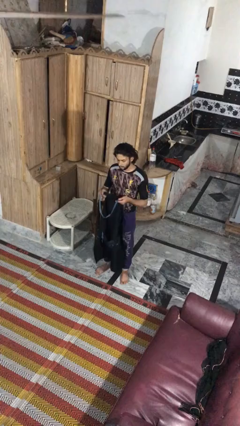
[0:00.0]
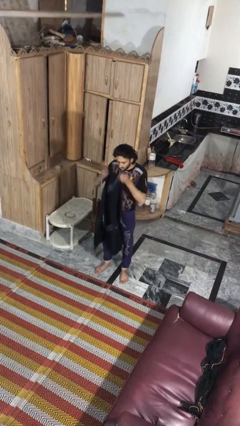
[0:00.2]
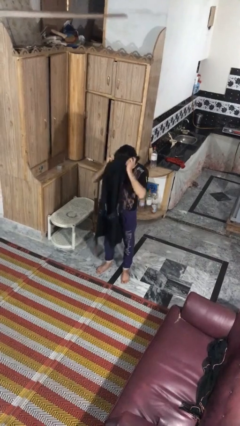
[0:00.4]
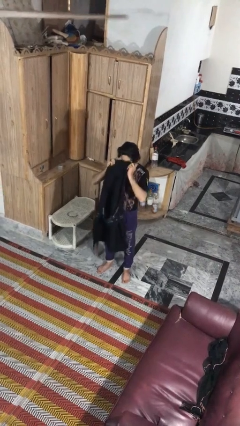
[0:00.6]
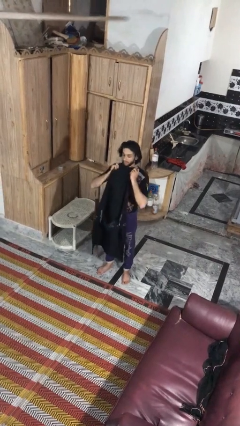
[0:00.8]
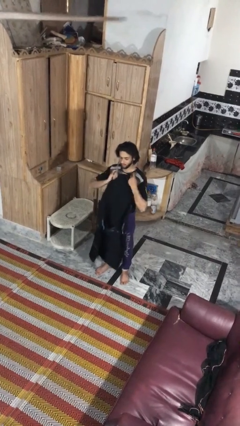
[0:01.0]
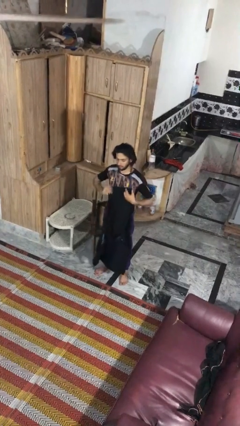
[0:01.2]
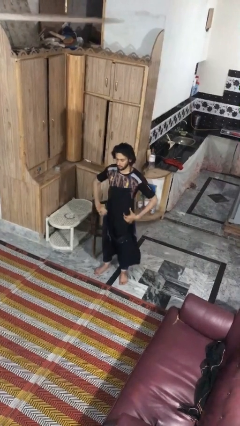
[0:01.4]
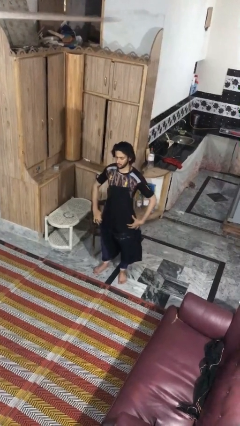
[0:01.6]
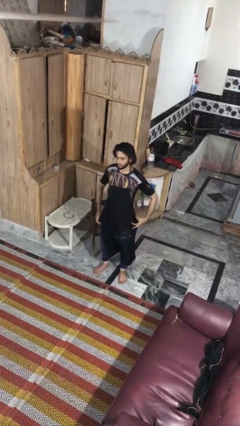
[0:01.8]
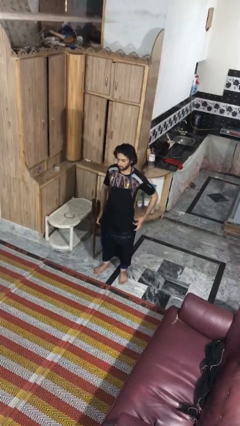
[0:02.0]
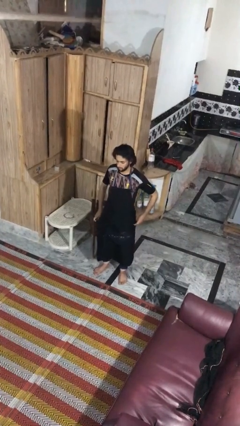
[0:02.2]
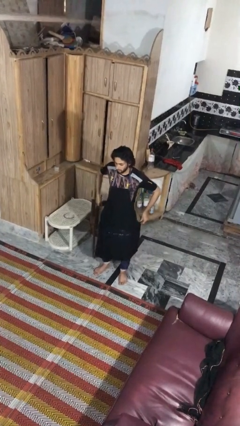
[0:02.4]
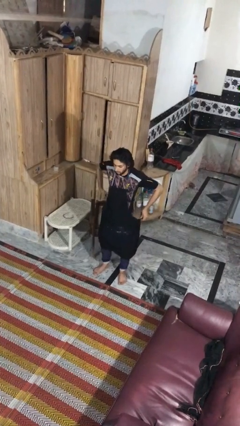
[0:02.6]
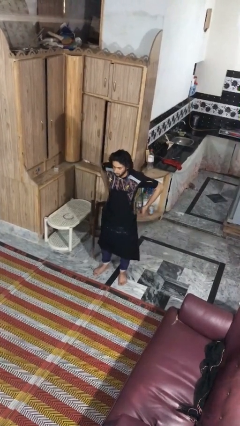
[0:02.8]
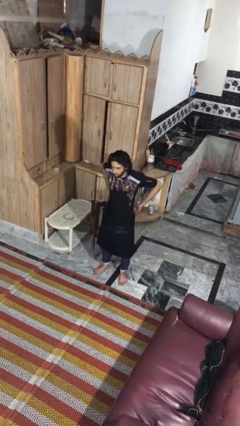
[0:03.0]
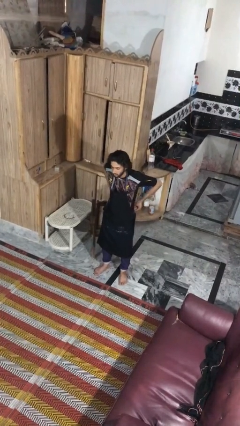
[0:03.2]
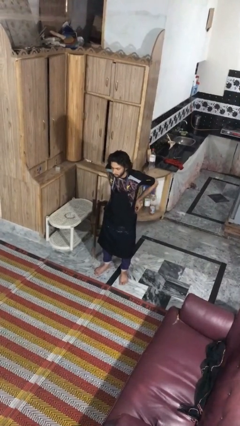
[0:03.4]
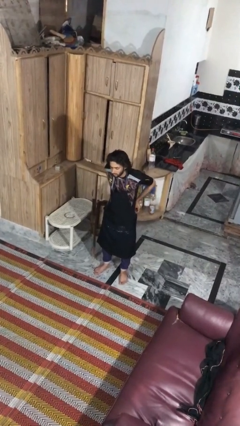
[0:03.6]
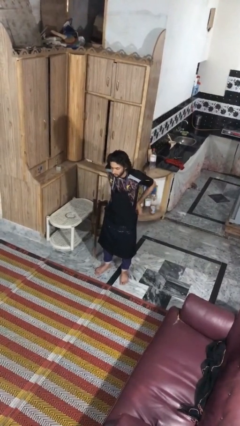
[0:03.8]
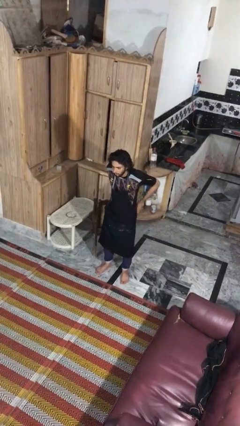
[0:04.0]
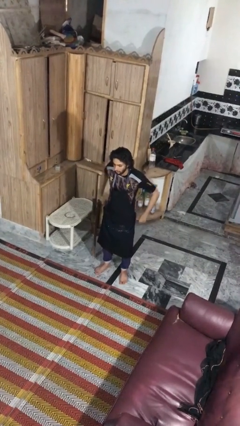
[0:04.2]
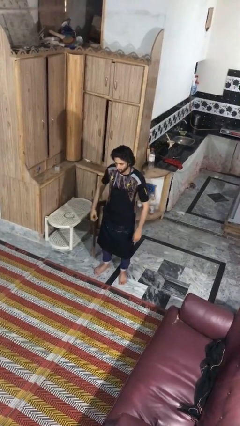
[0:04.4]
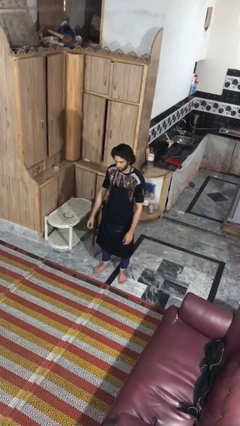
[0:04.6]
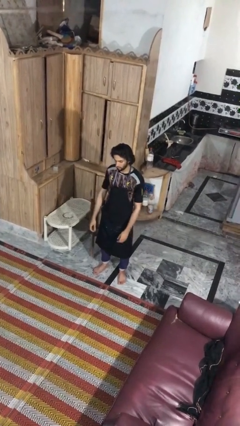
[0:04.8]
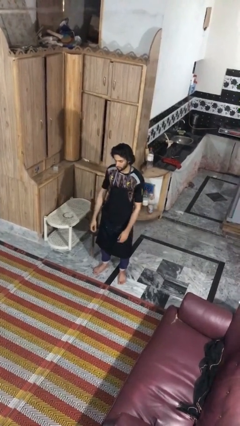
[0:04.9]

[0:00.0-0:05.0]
person puts on apron

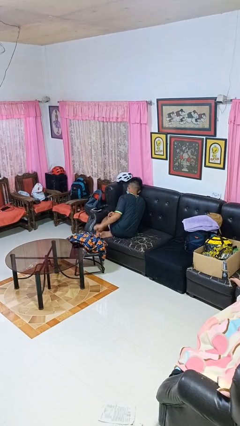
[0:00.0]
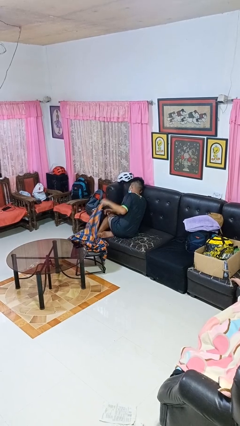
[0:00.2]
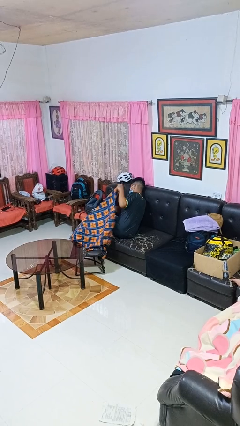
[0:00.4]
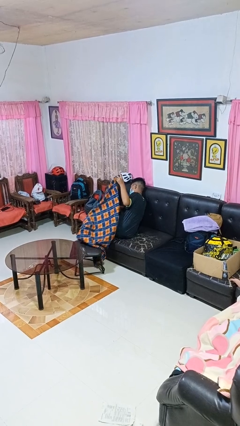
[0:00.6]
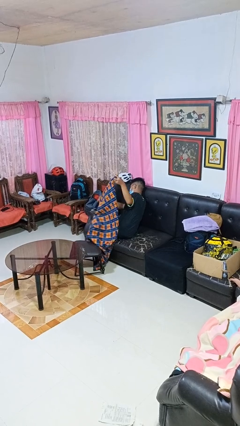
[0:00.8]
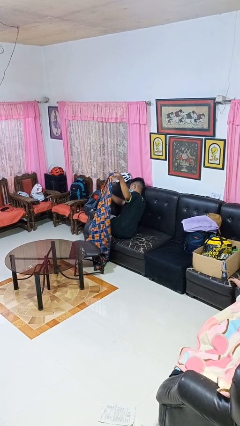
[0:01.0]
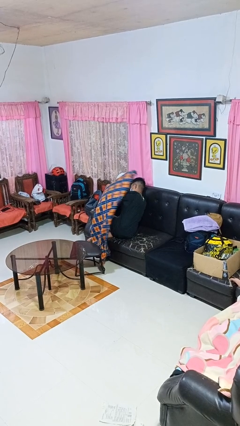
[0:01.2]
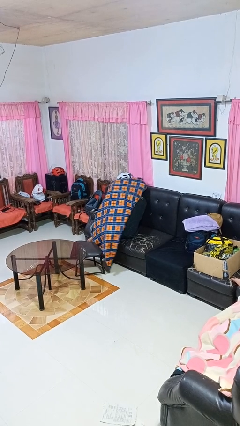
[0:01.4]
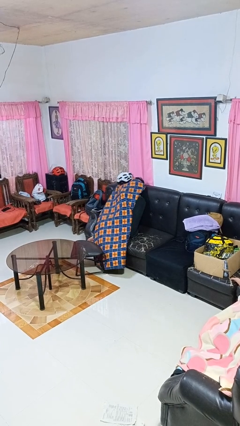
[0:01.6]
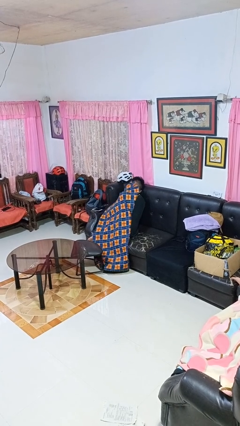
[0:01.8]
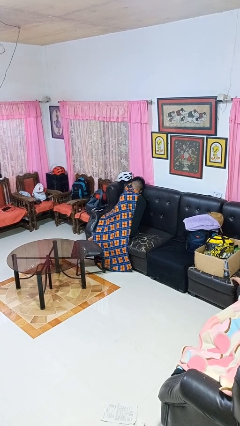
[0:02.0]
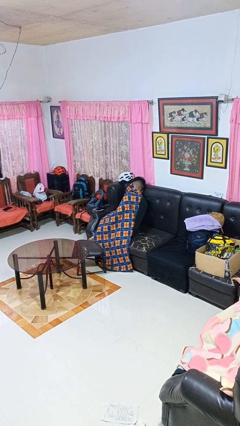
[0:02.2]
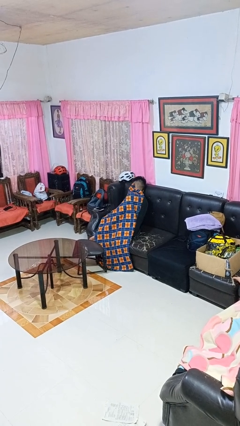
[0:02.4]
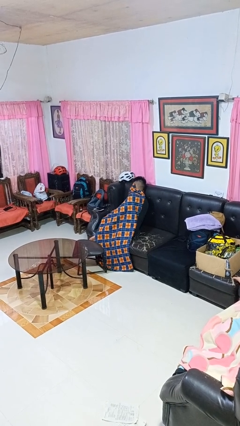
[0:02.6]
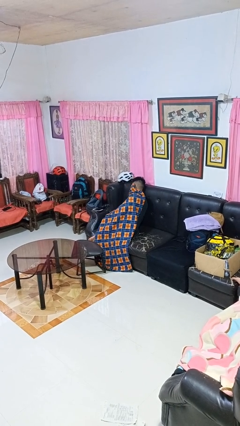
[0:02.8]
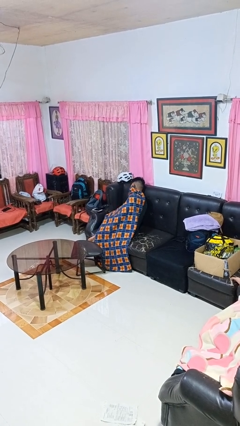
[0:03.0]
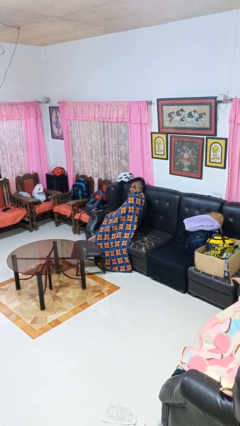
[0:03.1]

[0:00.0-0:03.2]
person covers with blanket

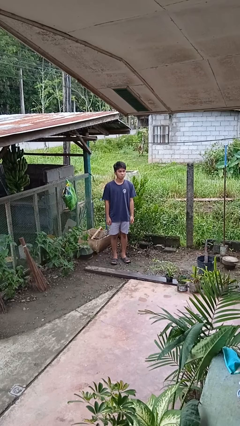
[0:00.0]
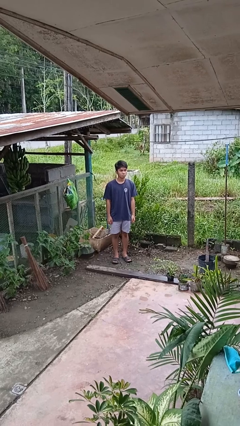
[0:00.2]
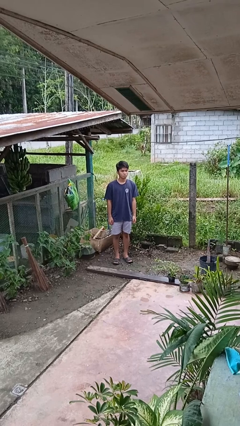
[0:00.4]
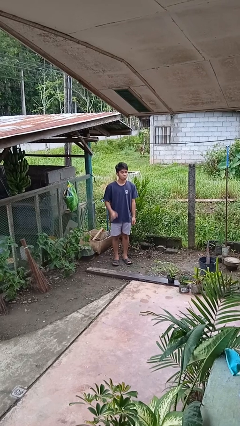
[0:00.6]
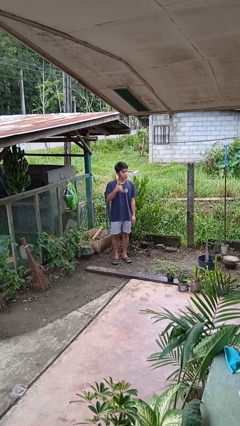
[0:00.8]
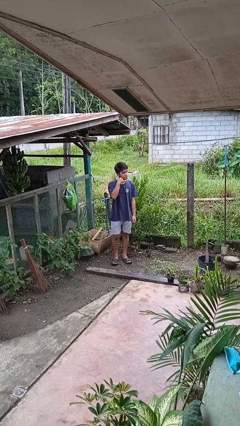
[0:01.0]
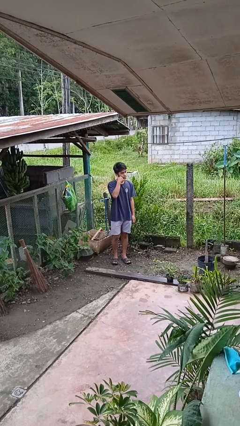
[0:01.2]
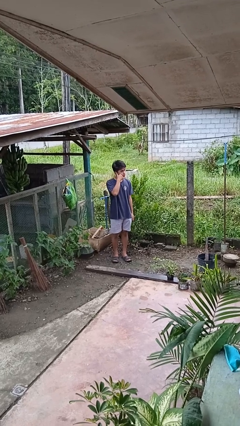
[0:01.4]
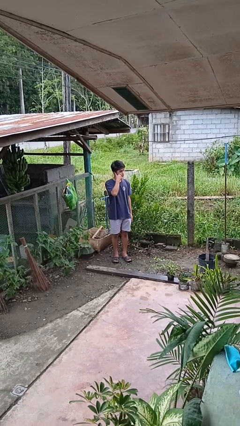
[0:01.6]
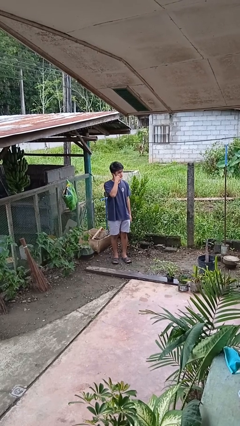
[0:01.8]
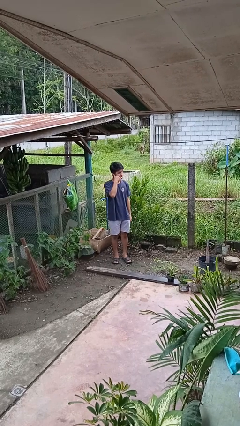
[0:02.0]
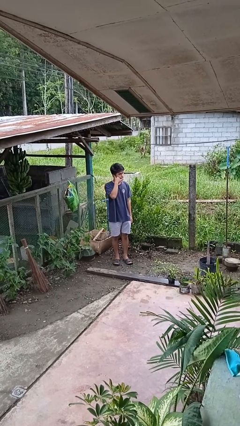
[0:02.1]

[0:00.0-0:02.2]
person gestures call me

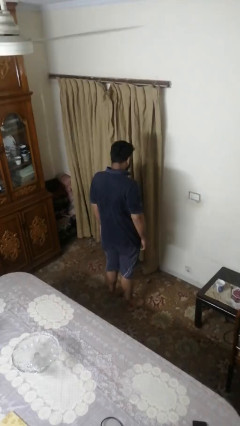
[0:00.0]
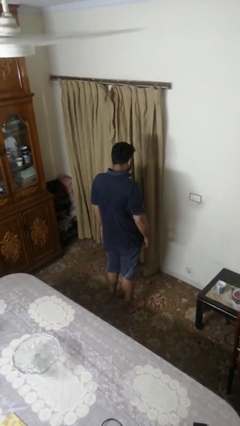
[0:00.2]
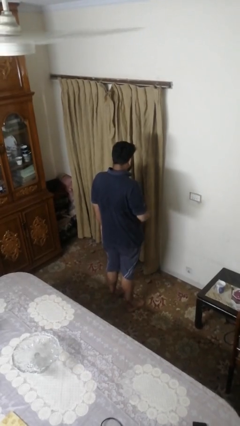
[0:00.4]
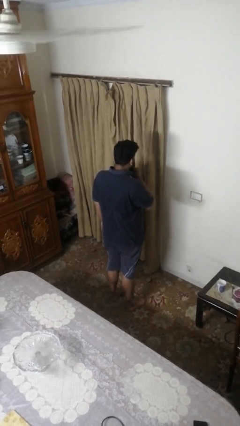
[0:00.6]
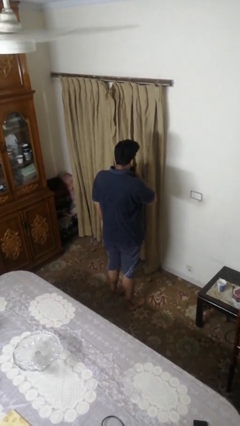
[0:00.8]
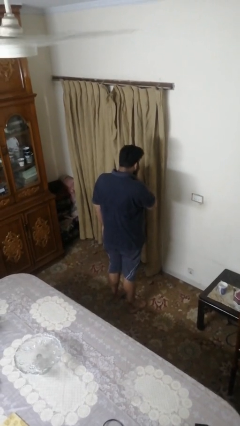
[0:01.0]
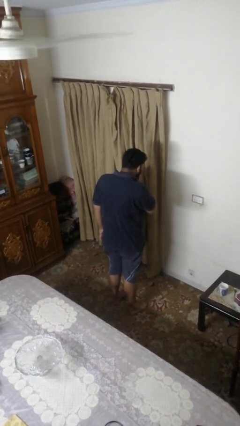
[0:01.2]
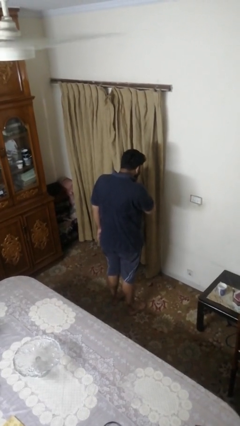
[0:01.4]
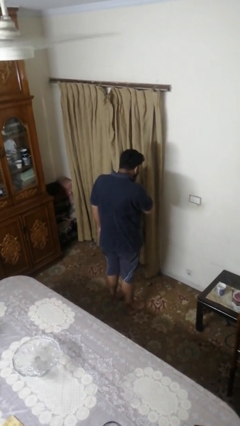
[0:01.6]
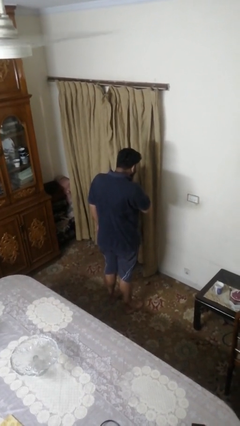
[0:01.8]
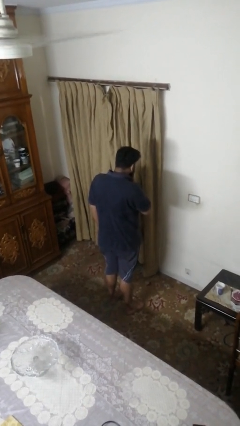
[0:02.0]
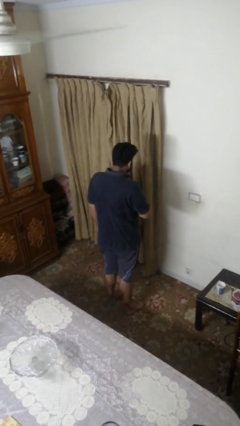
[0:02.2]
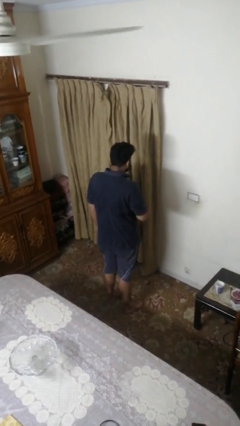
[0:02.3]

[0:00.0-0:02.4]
person strokes chin

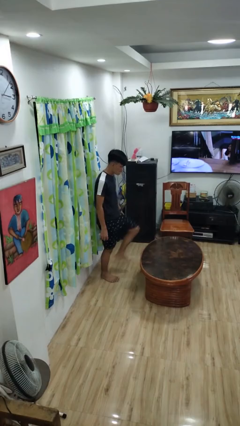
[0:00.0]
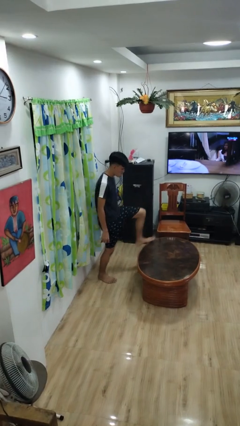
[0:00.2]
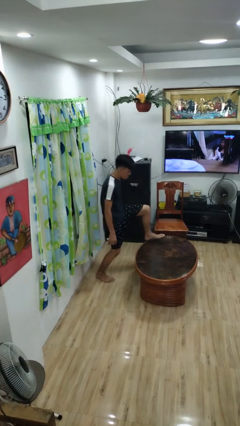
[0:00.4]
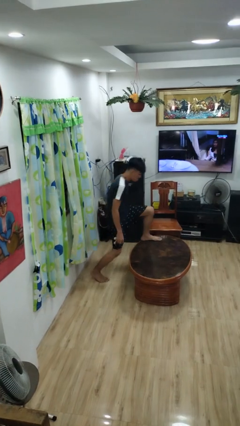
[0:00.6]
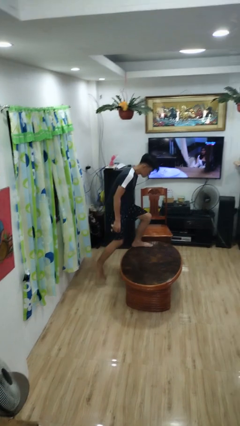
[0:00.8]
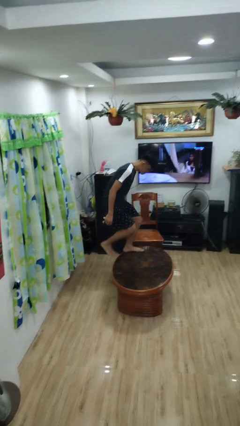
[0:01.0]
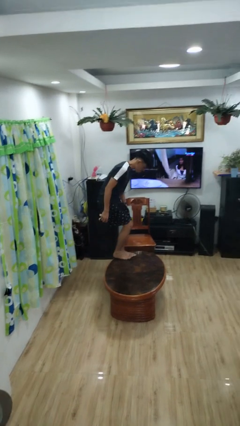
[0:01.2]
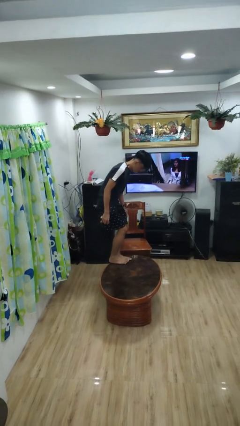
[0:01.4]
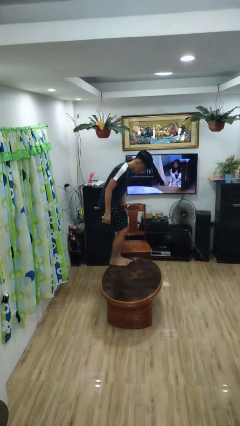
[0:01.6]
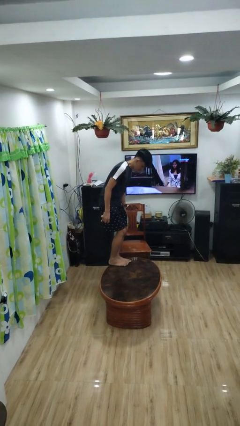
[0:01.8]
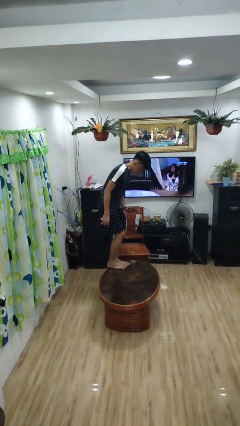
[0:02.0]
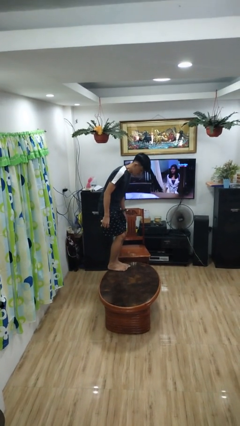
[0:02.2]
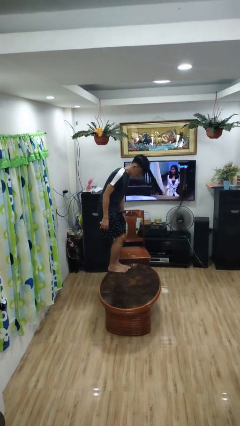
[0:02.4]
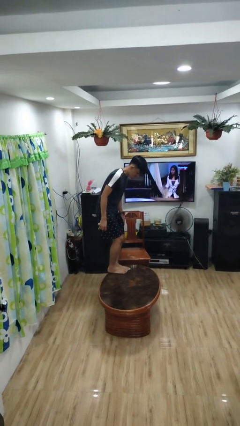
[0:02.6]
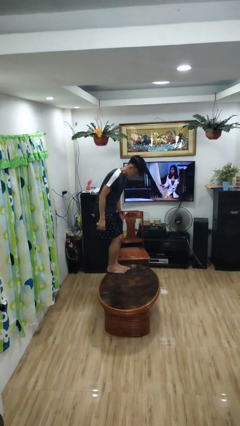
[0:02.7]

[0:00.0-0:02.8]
person climbs on table

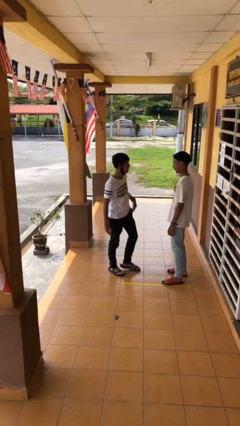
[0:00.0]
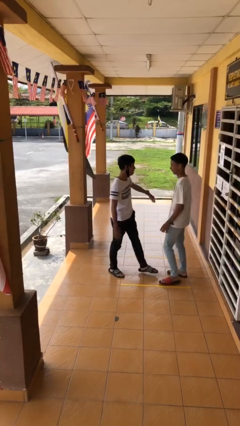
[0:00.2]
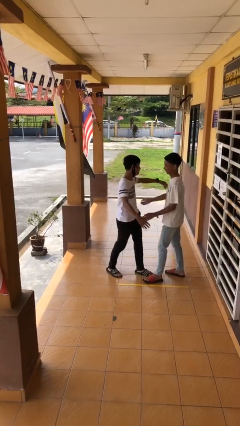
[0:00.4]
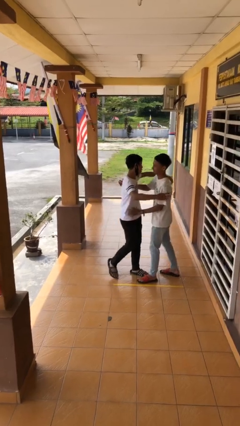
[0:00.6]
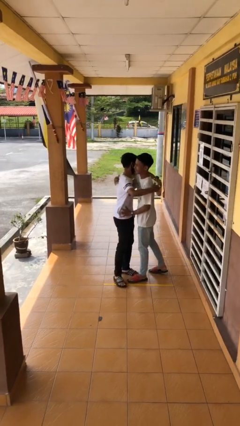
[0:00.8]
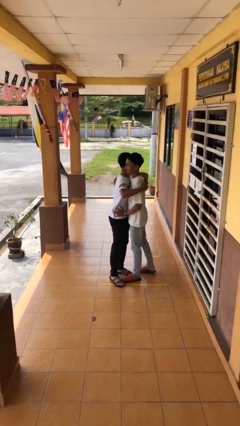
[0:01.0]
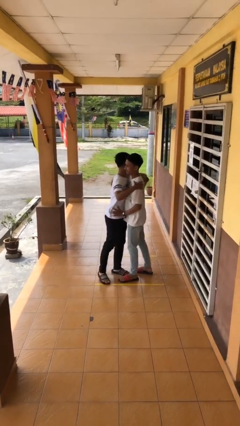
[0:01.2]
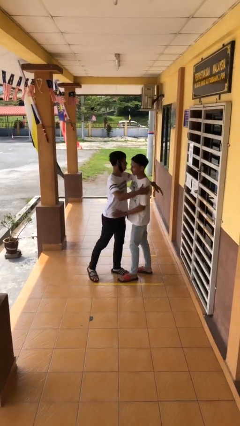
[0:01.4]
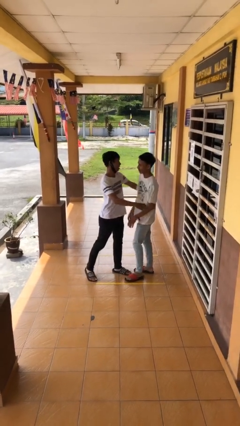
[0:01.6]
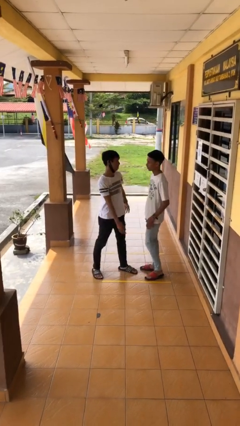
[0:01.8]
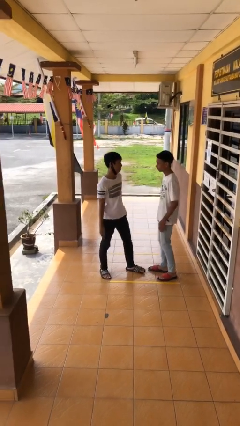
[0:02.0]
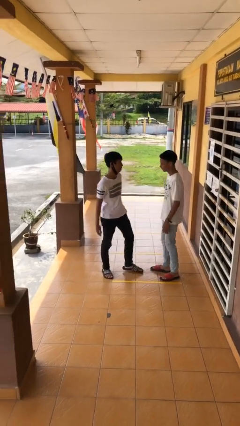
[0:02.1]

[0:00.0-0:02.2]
person embraces person
